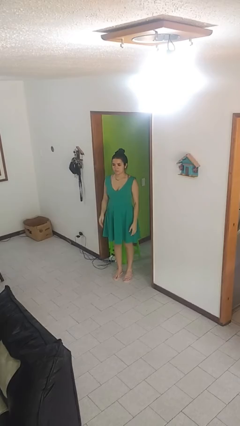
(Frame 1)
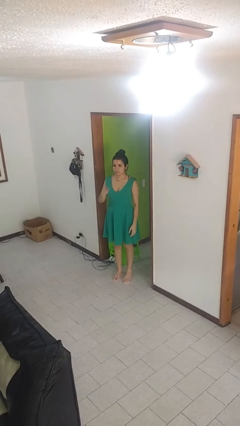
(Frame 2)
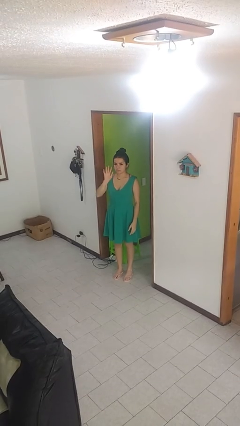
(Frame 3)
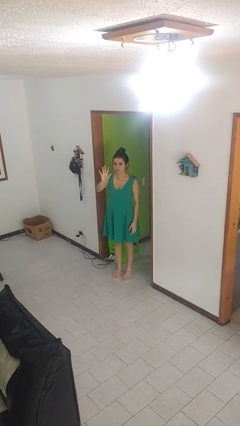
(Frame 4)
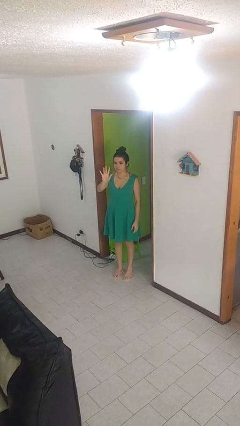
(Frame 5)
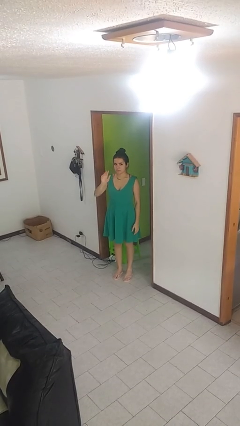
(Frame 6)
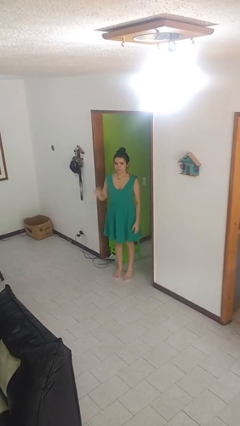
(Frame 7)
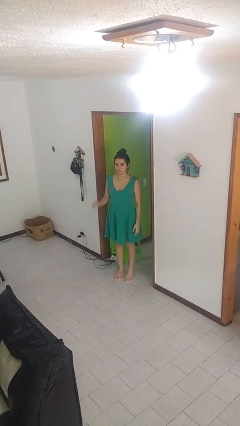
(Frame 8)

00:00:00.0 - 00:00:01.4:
person gestures number five

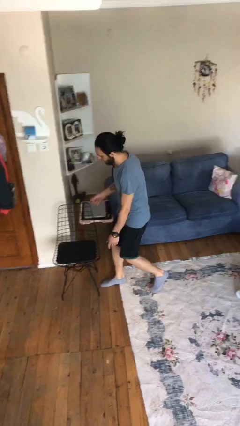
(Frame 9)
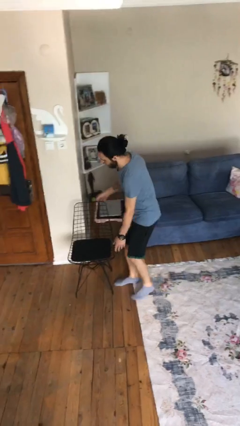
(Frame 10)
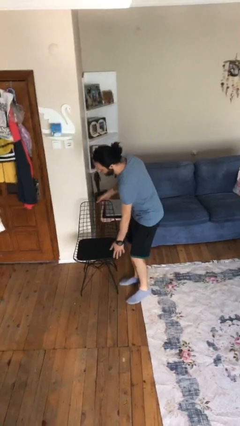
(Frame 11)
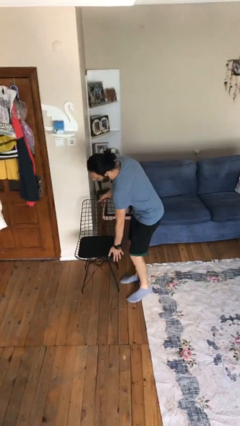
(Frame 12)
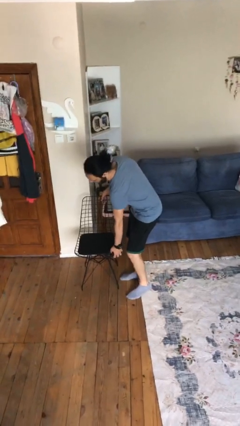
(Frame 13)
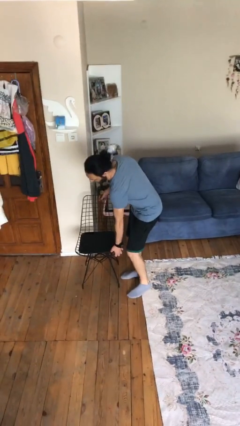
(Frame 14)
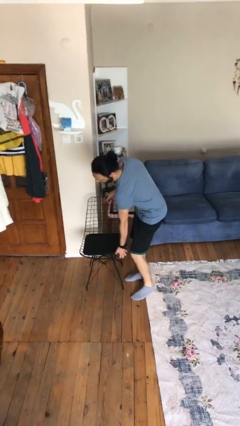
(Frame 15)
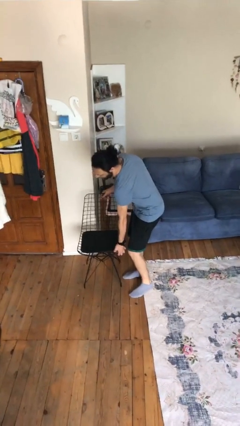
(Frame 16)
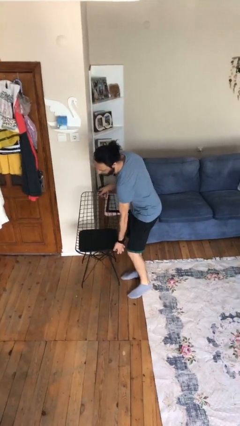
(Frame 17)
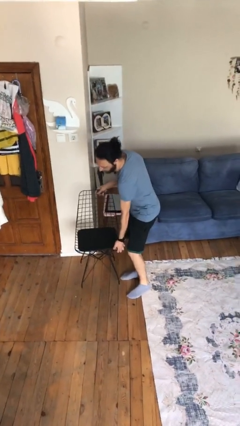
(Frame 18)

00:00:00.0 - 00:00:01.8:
person picks up object from floor

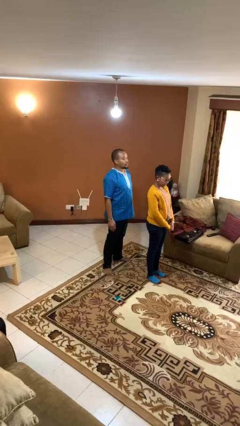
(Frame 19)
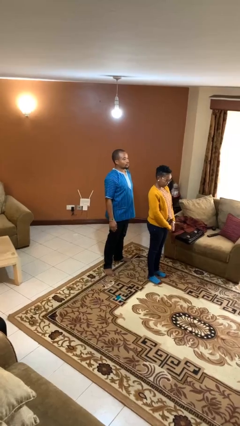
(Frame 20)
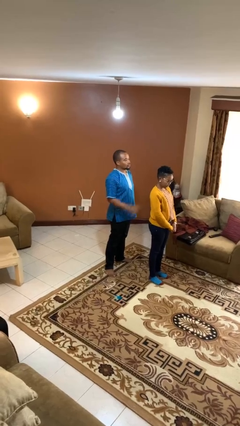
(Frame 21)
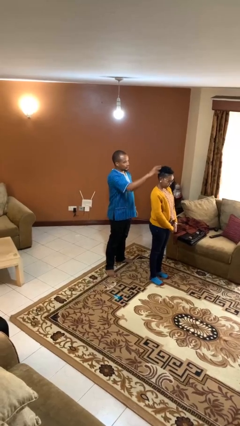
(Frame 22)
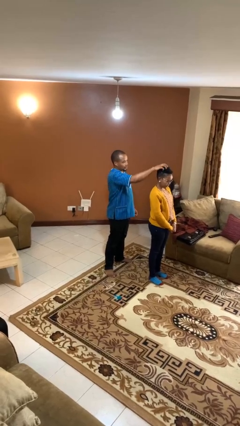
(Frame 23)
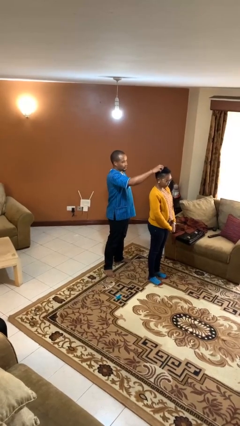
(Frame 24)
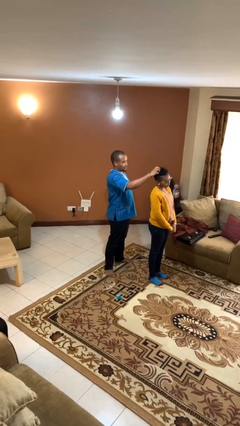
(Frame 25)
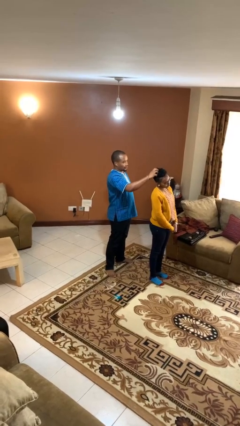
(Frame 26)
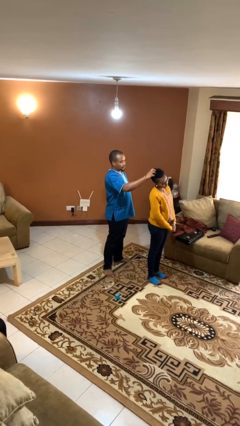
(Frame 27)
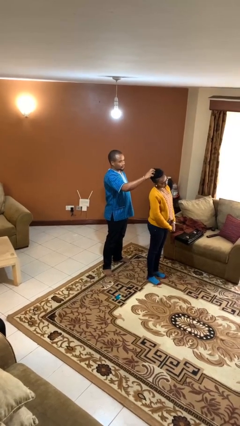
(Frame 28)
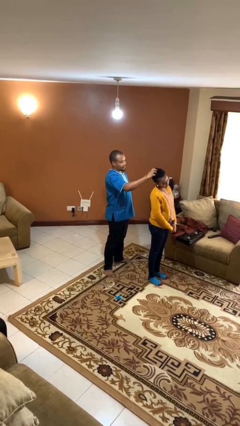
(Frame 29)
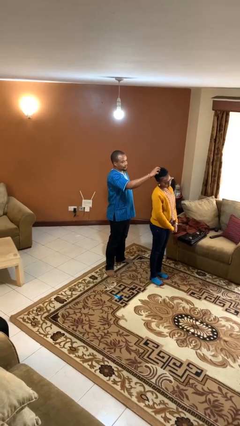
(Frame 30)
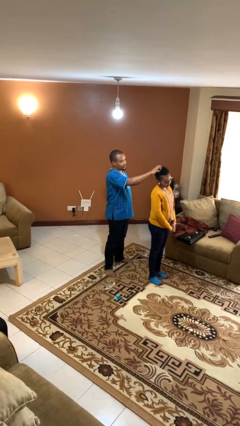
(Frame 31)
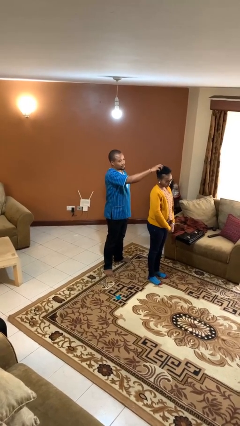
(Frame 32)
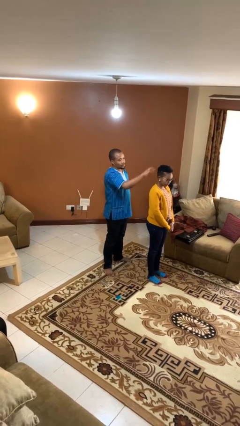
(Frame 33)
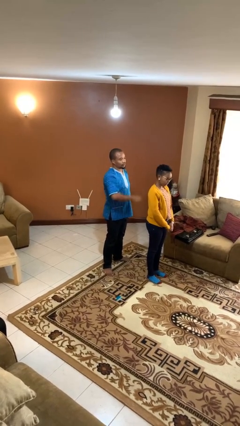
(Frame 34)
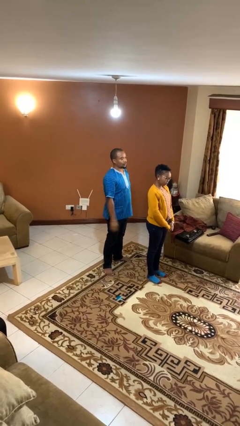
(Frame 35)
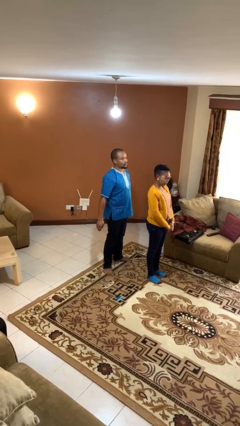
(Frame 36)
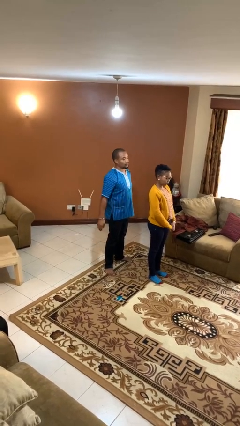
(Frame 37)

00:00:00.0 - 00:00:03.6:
person grabs person by hair

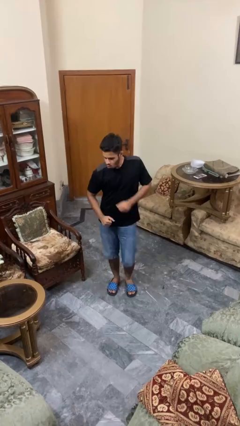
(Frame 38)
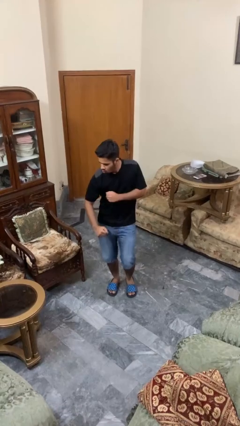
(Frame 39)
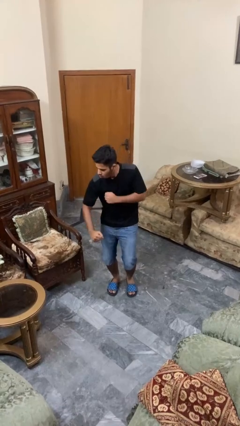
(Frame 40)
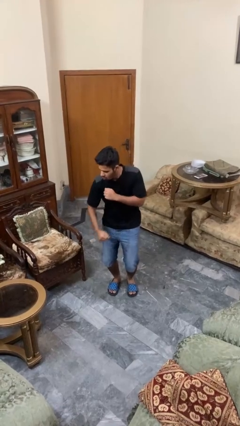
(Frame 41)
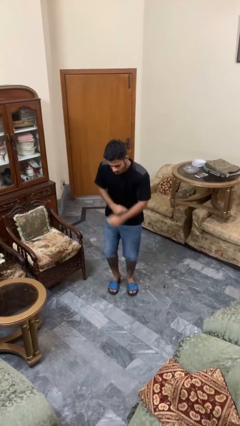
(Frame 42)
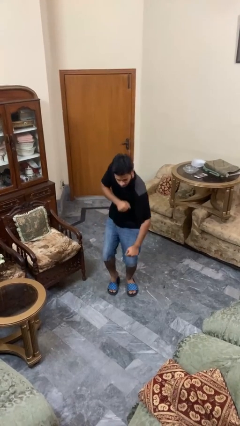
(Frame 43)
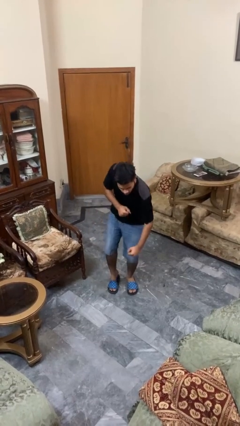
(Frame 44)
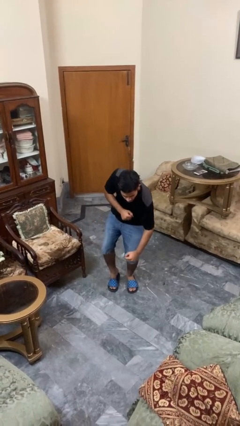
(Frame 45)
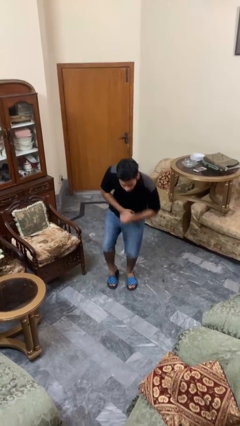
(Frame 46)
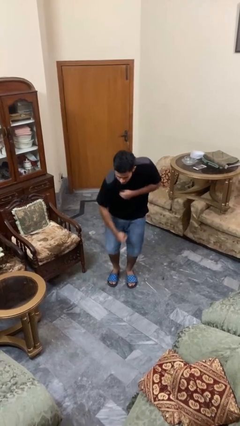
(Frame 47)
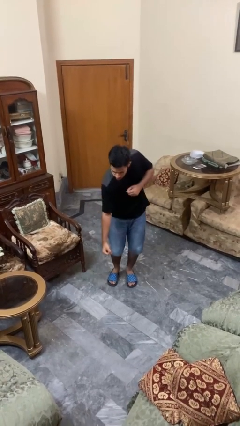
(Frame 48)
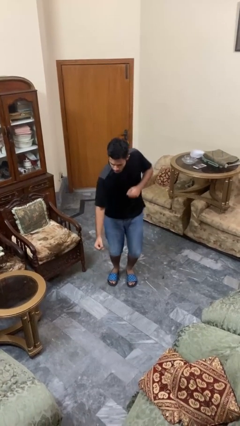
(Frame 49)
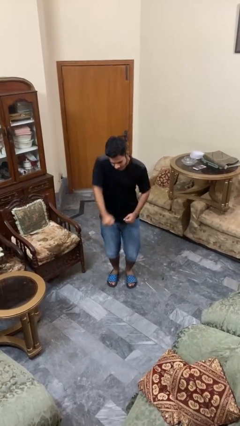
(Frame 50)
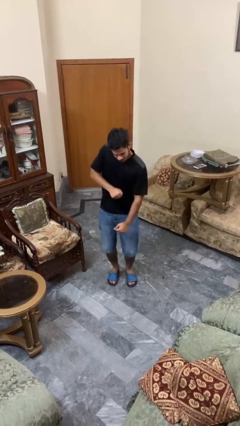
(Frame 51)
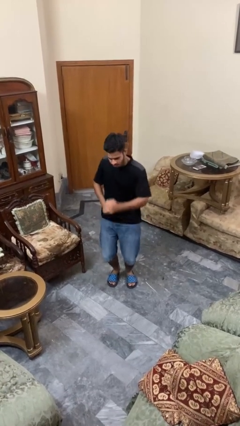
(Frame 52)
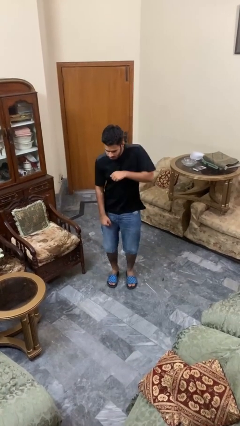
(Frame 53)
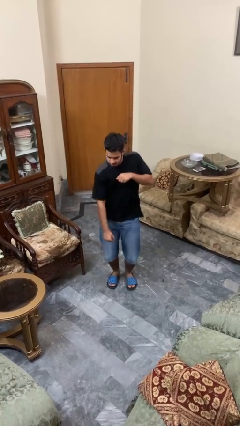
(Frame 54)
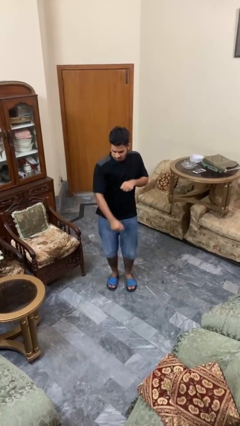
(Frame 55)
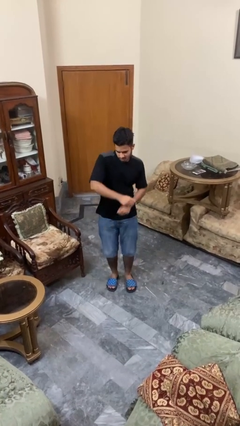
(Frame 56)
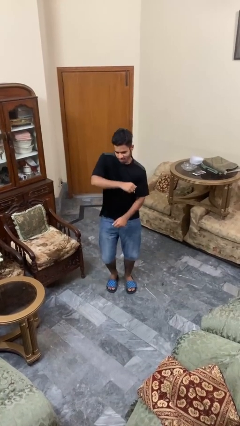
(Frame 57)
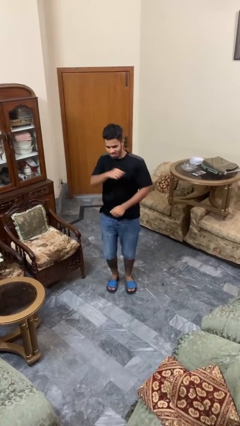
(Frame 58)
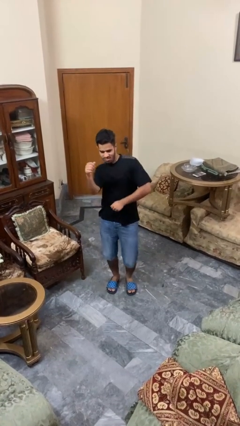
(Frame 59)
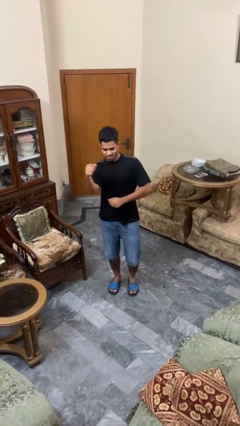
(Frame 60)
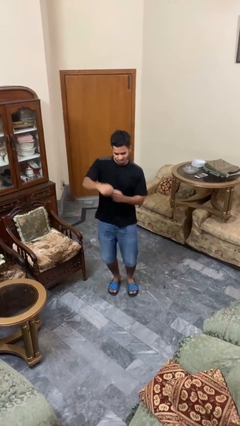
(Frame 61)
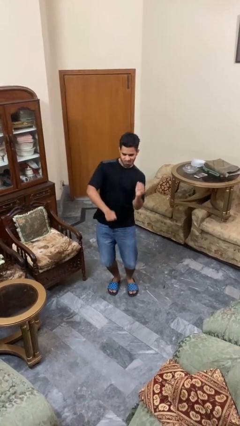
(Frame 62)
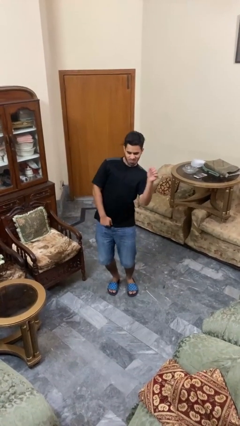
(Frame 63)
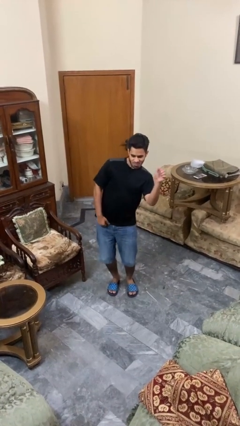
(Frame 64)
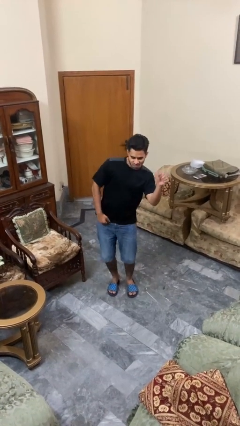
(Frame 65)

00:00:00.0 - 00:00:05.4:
person dances in place

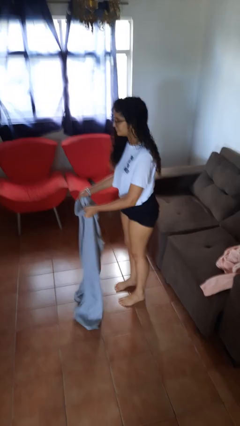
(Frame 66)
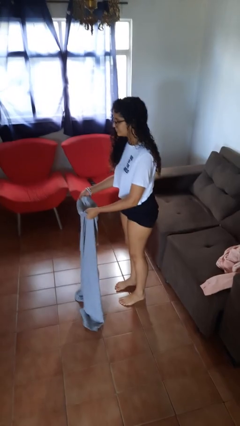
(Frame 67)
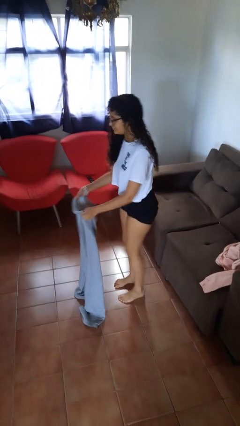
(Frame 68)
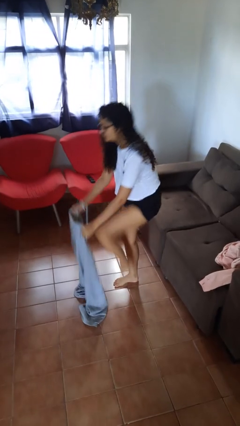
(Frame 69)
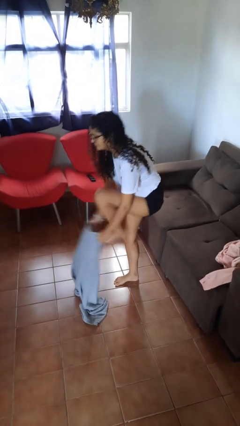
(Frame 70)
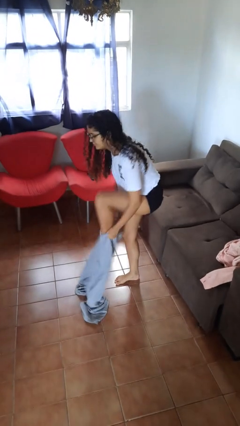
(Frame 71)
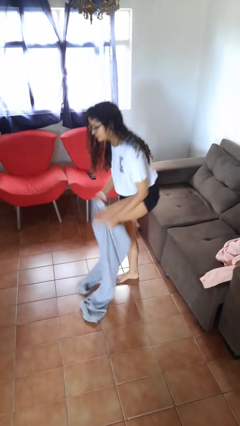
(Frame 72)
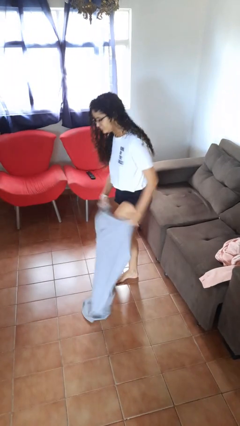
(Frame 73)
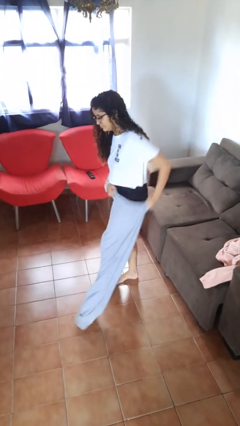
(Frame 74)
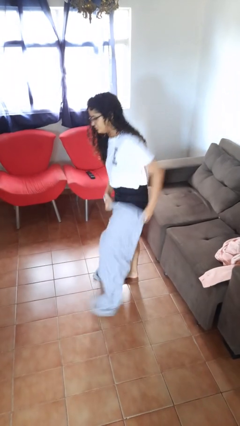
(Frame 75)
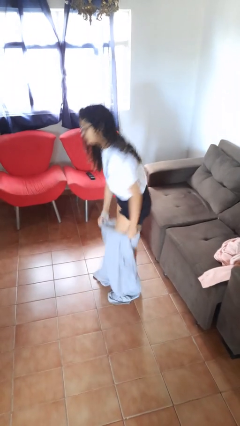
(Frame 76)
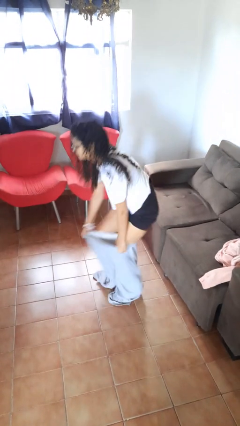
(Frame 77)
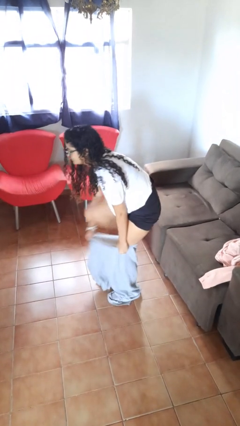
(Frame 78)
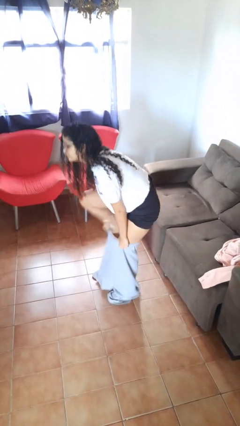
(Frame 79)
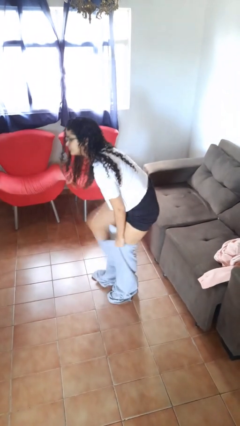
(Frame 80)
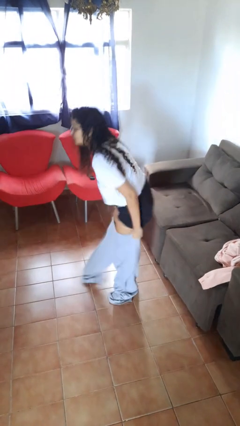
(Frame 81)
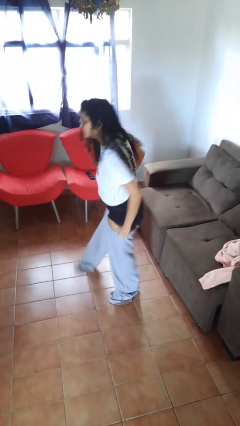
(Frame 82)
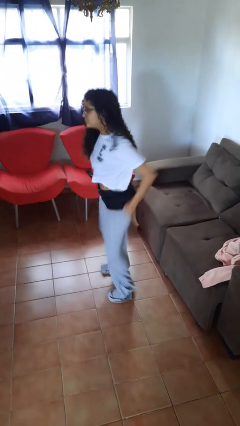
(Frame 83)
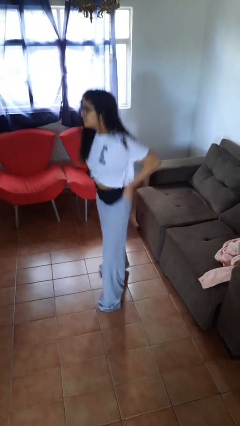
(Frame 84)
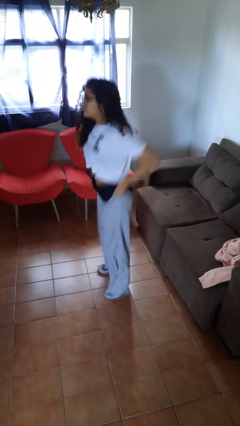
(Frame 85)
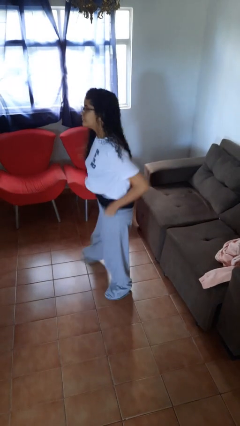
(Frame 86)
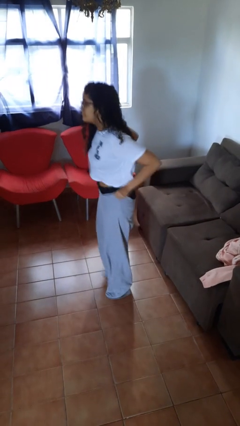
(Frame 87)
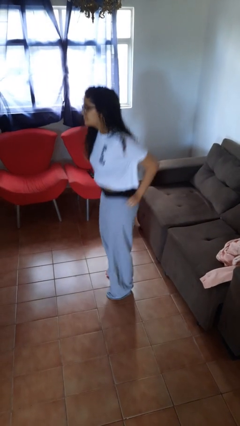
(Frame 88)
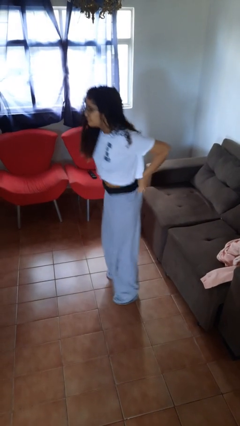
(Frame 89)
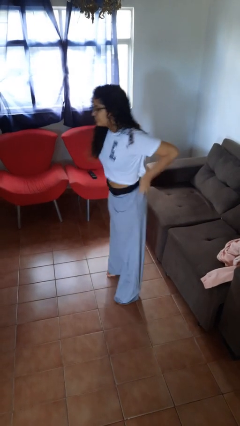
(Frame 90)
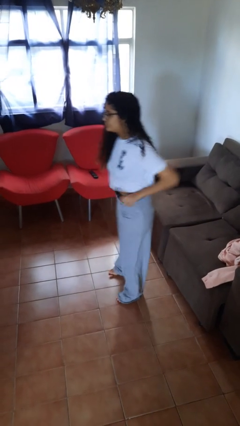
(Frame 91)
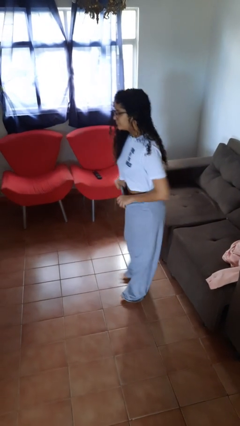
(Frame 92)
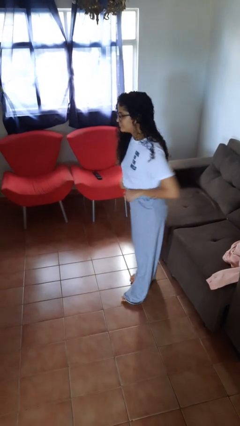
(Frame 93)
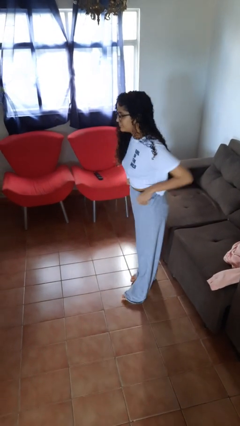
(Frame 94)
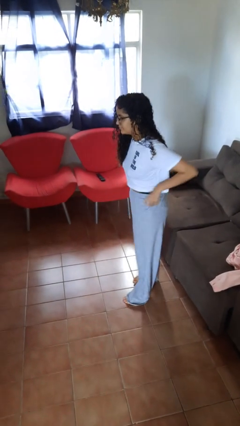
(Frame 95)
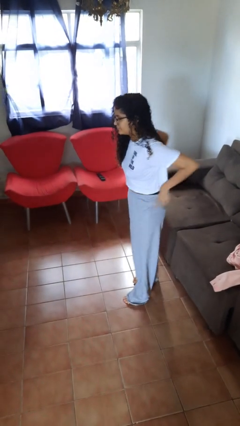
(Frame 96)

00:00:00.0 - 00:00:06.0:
person puts on pants
